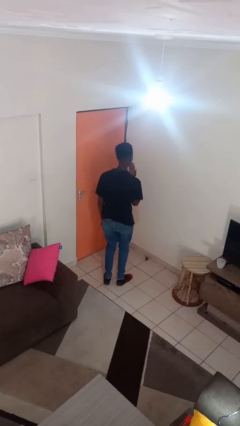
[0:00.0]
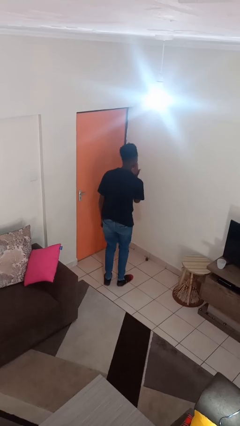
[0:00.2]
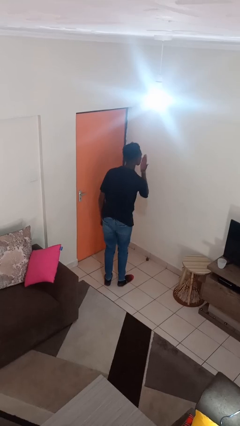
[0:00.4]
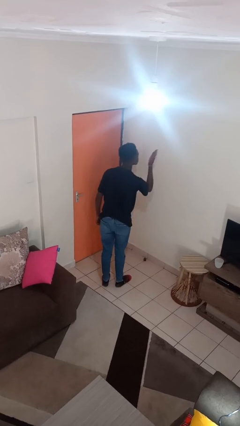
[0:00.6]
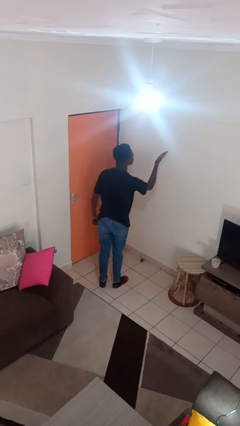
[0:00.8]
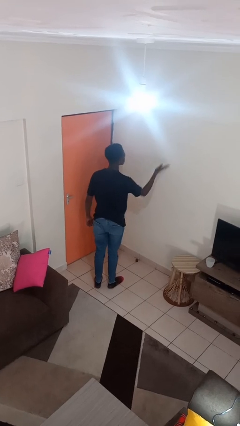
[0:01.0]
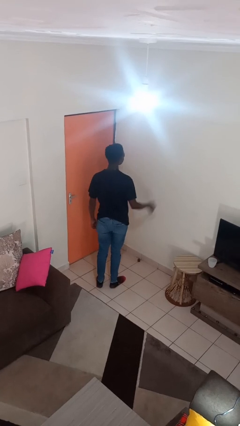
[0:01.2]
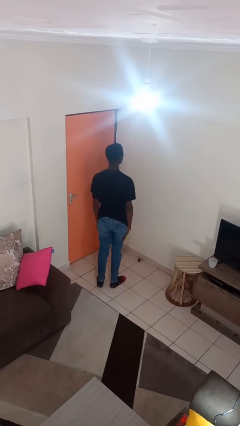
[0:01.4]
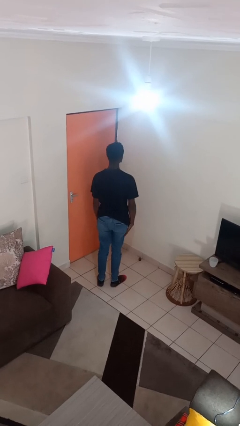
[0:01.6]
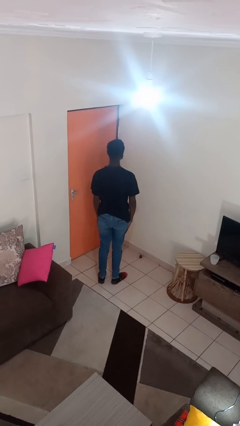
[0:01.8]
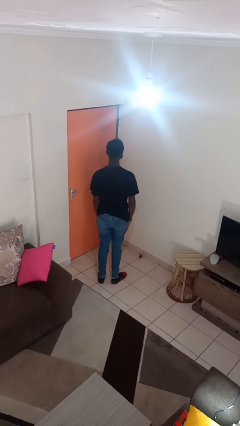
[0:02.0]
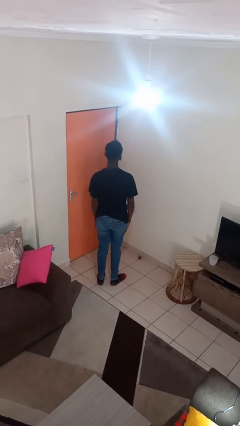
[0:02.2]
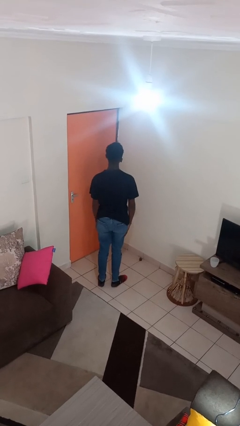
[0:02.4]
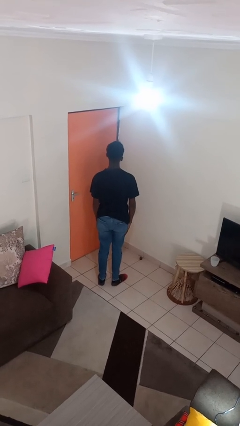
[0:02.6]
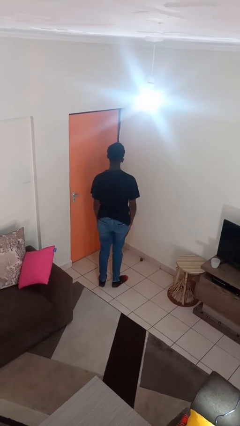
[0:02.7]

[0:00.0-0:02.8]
person gestures blow kiss

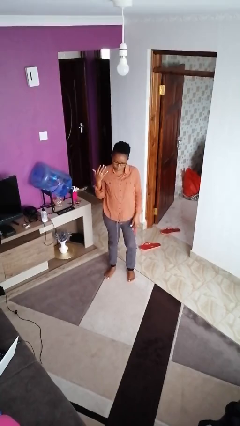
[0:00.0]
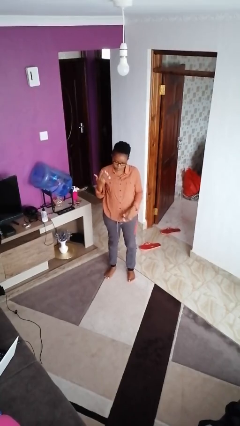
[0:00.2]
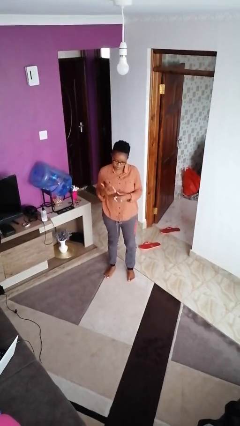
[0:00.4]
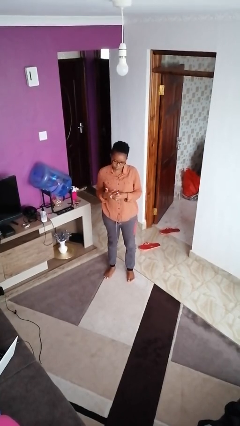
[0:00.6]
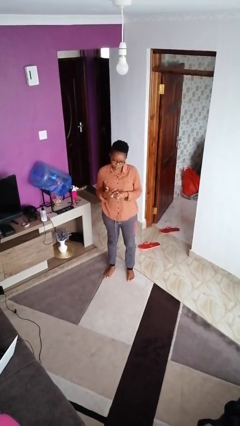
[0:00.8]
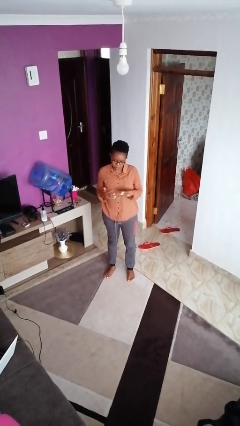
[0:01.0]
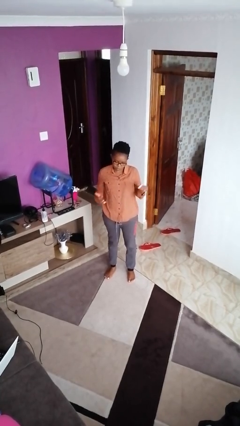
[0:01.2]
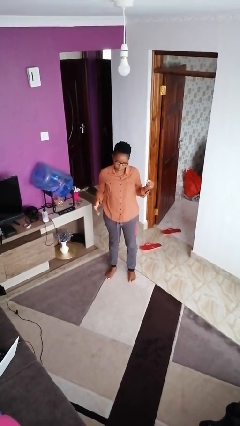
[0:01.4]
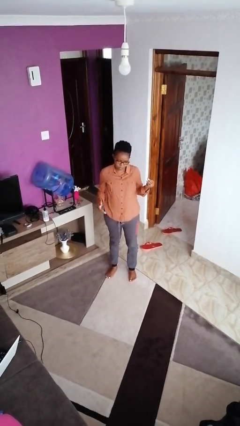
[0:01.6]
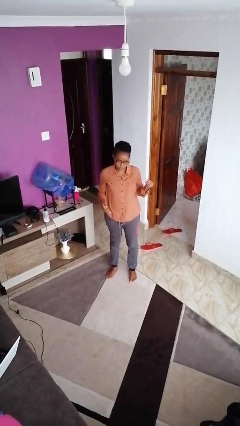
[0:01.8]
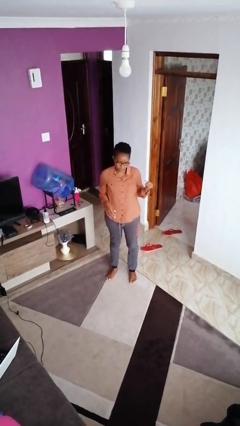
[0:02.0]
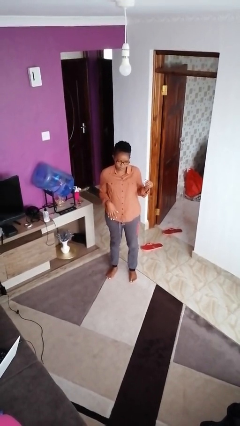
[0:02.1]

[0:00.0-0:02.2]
person takes off ring

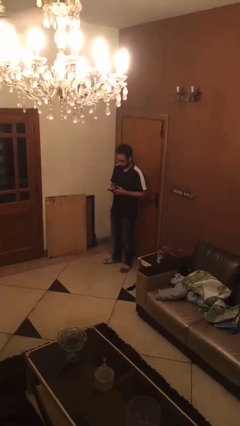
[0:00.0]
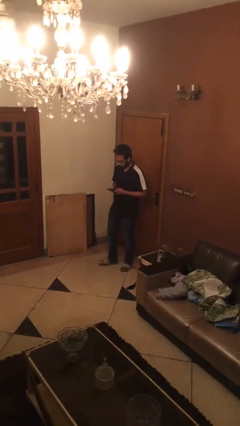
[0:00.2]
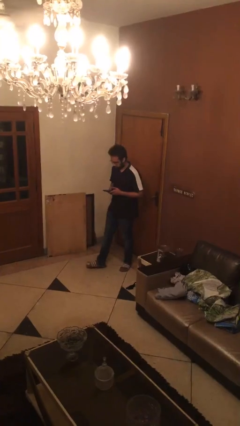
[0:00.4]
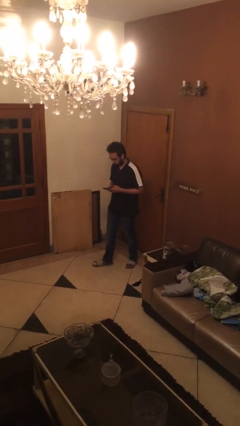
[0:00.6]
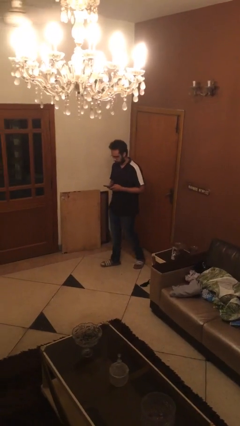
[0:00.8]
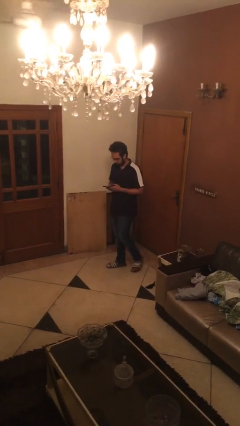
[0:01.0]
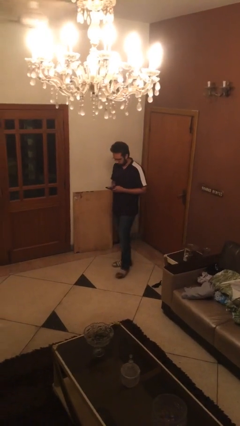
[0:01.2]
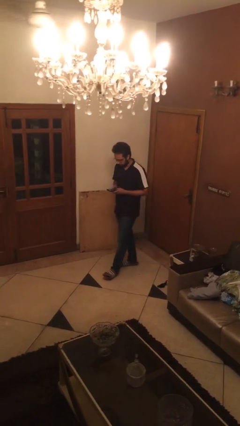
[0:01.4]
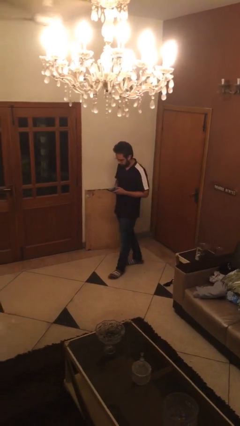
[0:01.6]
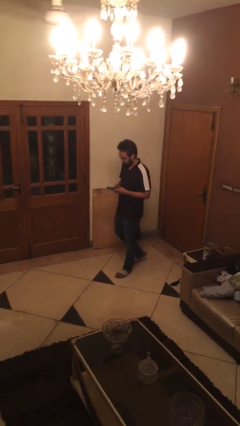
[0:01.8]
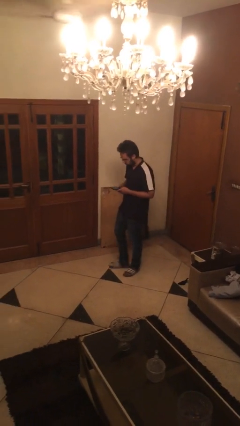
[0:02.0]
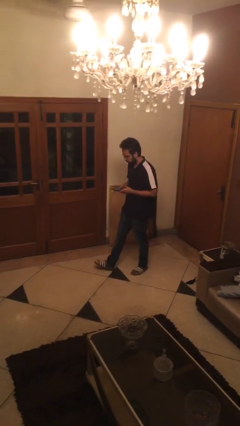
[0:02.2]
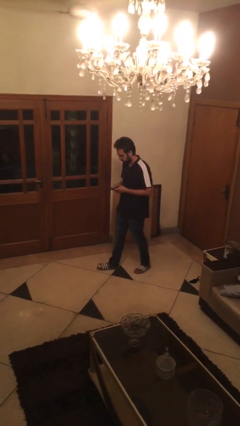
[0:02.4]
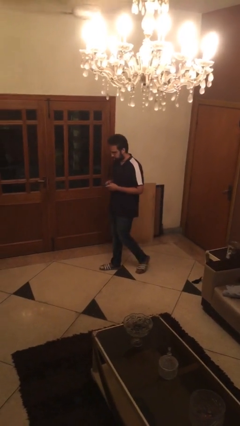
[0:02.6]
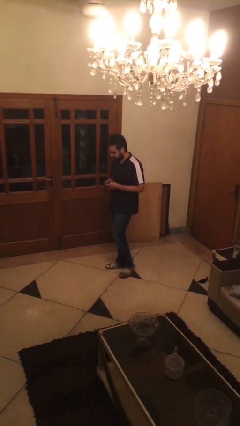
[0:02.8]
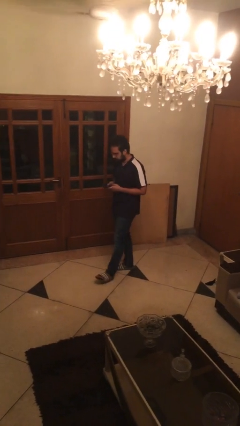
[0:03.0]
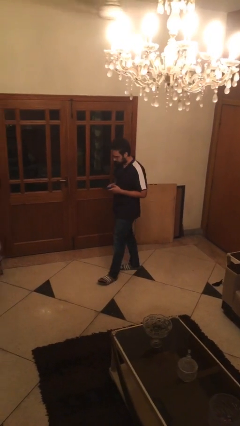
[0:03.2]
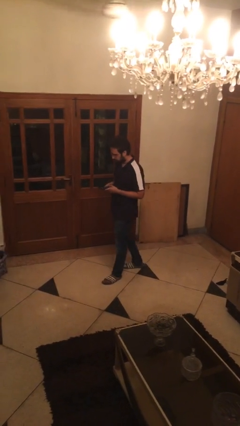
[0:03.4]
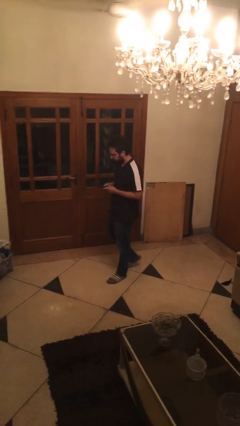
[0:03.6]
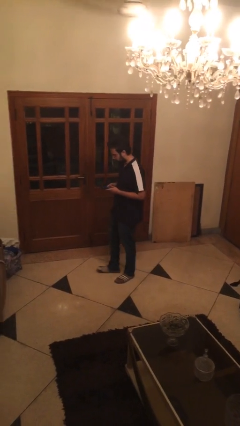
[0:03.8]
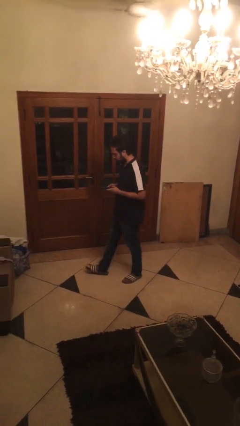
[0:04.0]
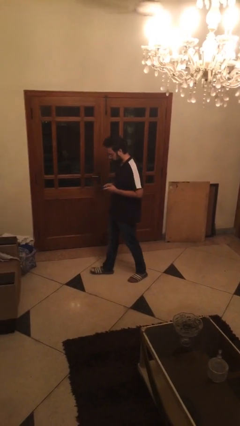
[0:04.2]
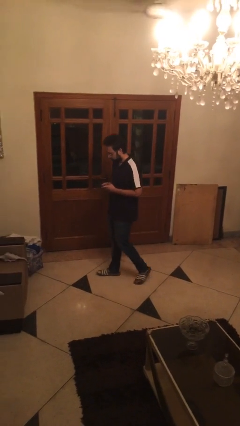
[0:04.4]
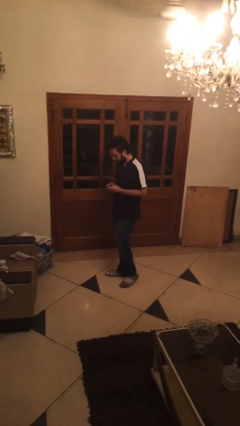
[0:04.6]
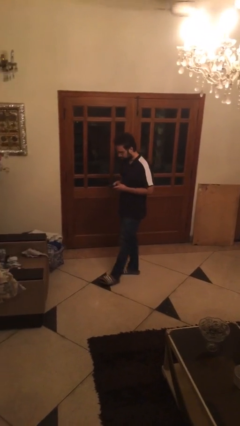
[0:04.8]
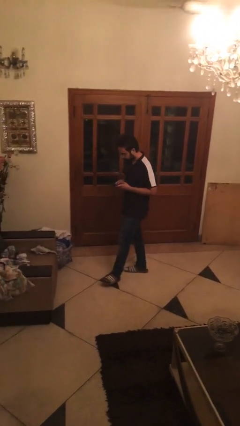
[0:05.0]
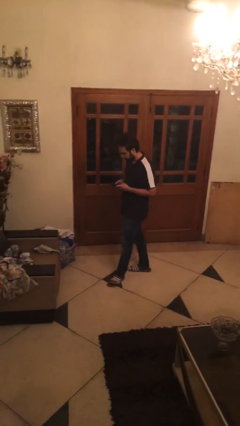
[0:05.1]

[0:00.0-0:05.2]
person texts on phone

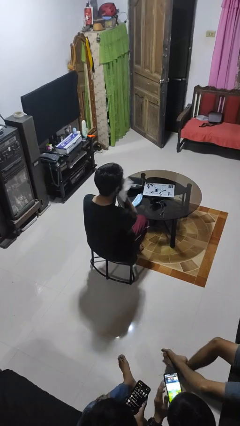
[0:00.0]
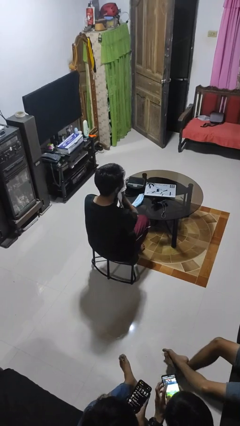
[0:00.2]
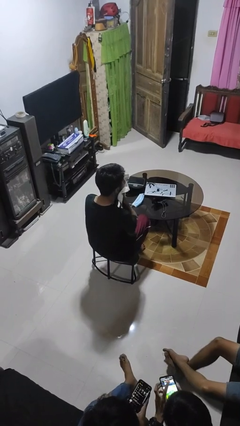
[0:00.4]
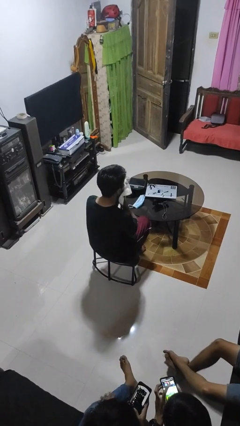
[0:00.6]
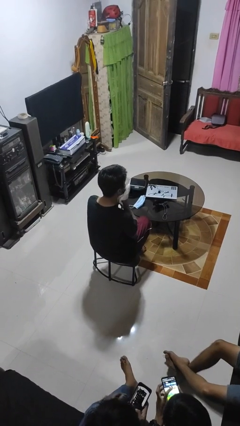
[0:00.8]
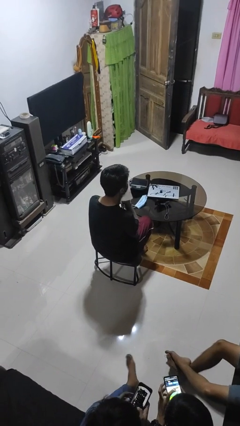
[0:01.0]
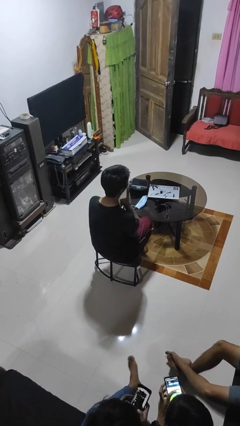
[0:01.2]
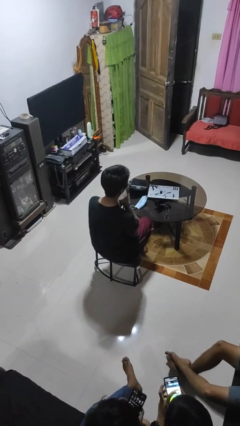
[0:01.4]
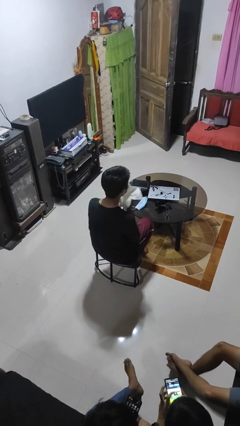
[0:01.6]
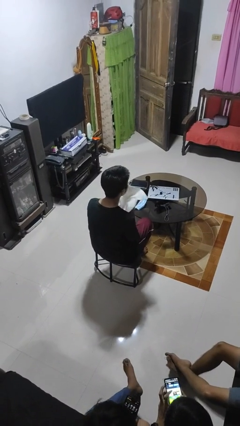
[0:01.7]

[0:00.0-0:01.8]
person wipes mouth with napkin

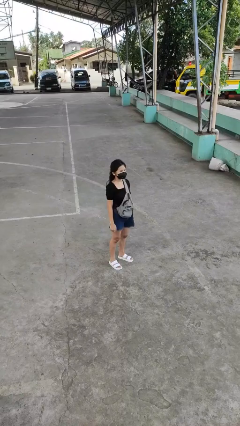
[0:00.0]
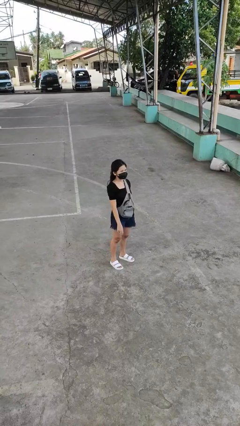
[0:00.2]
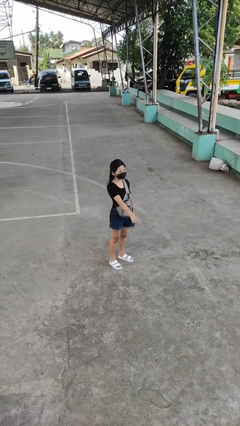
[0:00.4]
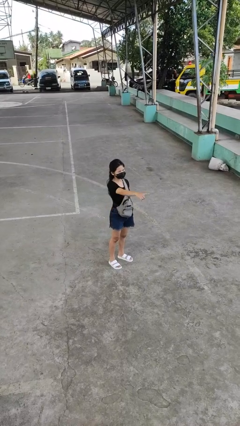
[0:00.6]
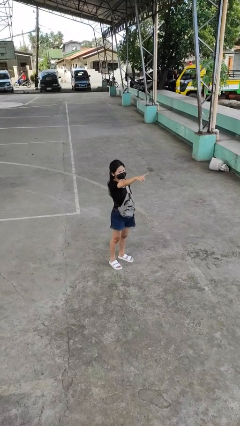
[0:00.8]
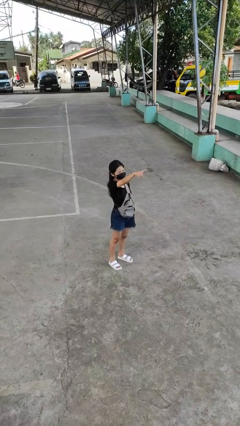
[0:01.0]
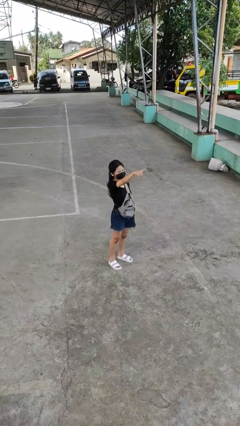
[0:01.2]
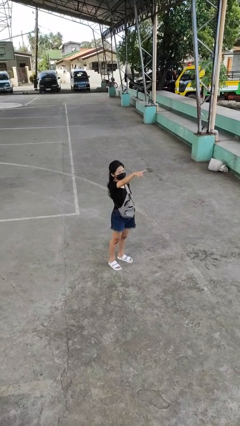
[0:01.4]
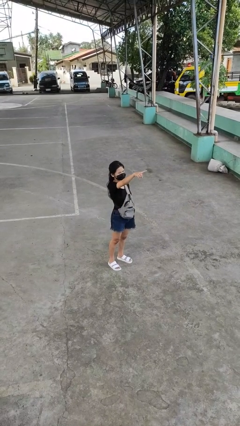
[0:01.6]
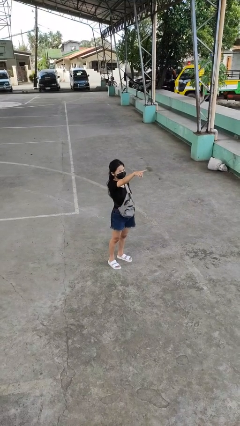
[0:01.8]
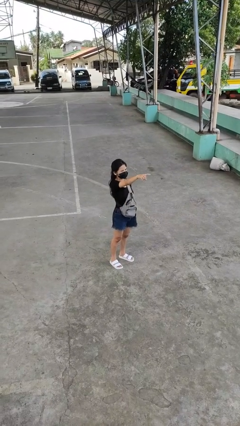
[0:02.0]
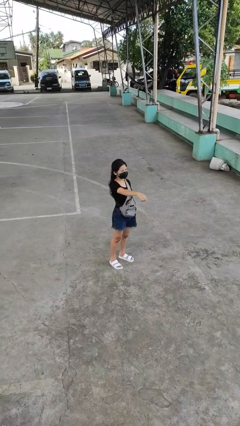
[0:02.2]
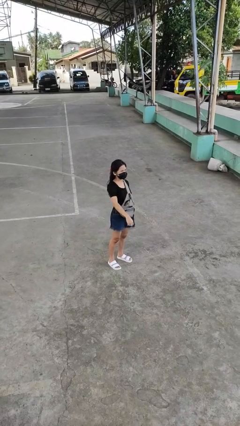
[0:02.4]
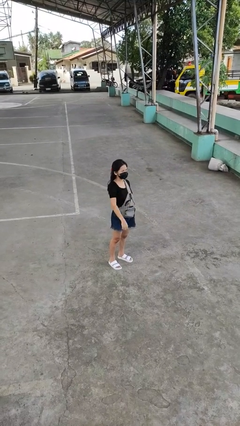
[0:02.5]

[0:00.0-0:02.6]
person points at person

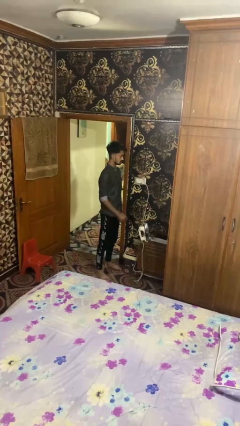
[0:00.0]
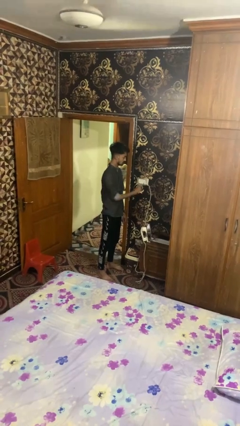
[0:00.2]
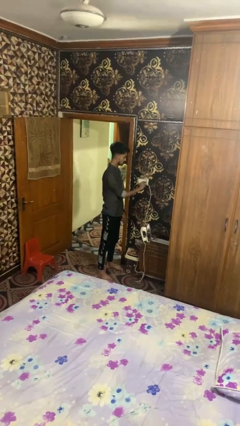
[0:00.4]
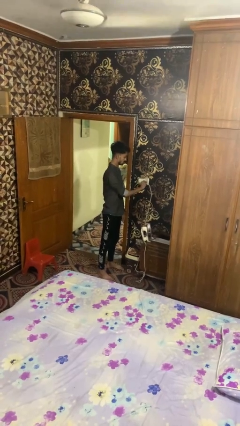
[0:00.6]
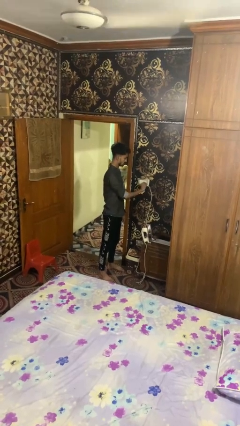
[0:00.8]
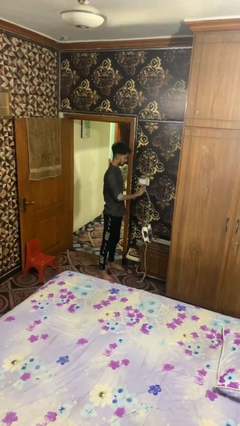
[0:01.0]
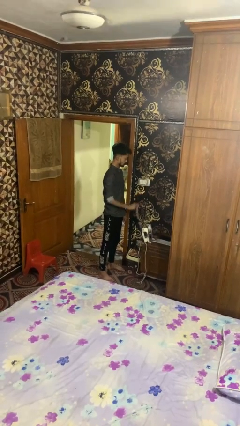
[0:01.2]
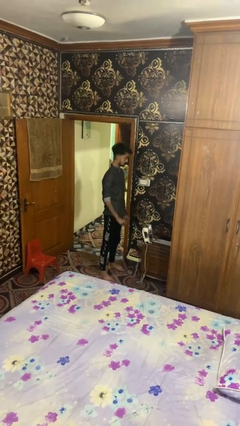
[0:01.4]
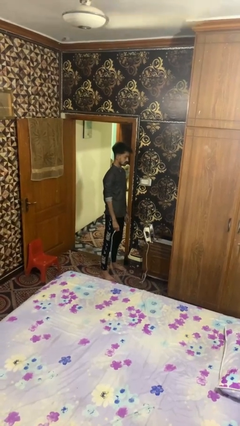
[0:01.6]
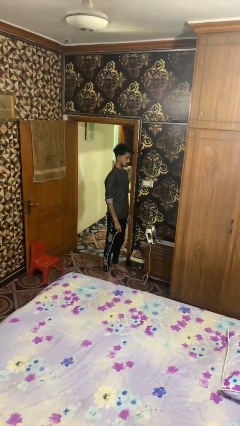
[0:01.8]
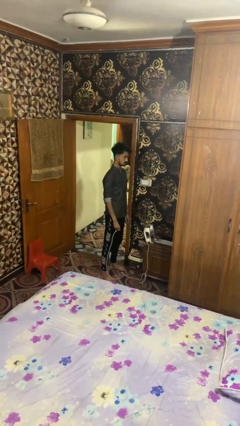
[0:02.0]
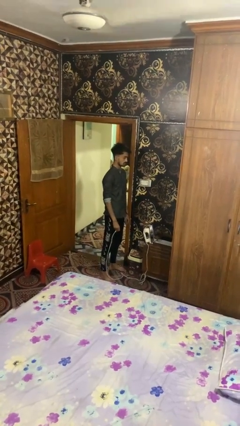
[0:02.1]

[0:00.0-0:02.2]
person unplugs from electrical socket

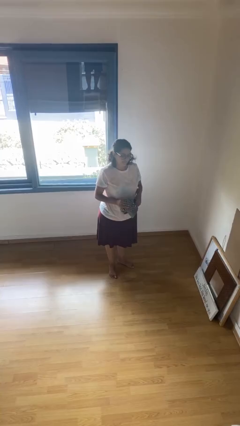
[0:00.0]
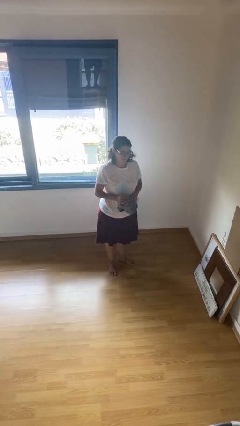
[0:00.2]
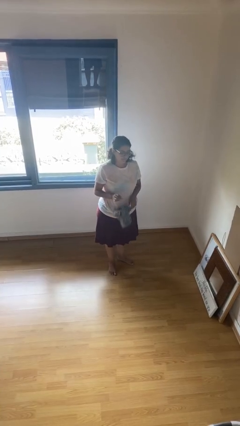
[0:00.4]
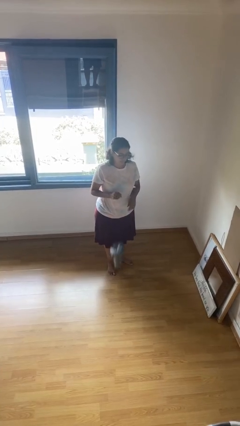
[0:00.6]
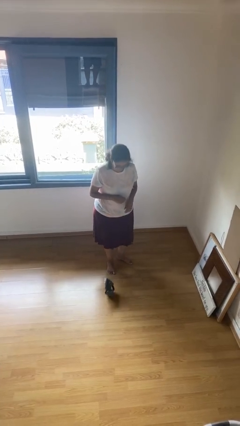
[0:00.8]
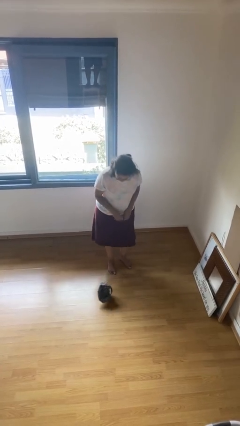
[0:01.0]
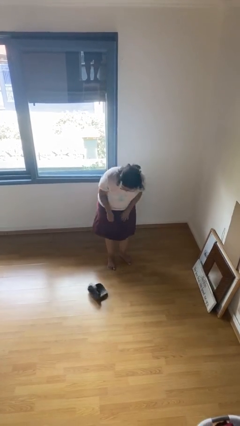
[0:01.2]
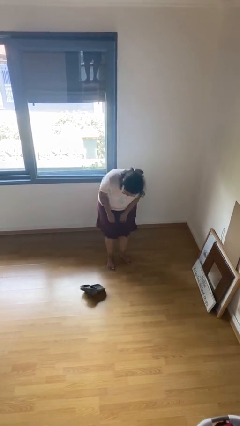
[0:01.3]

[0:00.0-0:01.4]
person drops object
